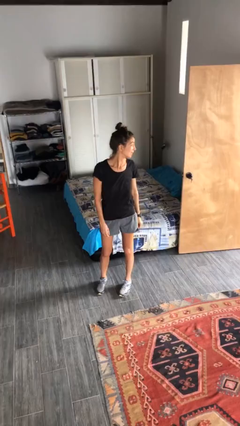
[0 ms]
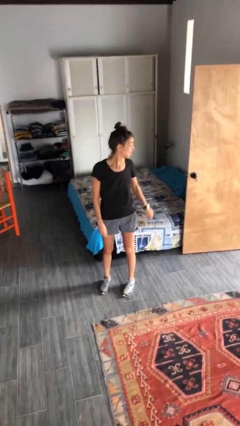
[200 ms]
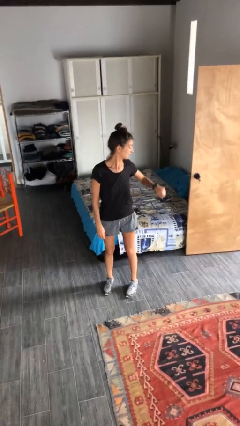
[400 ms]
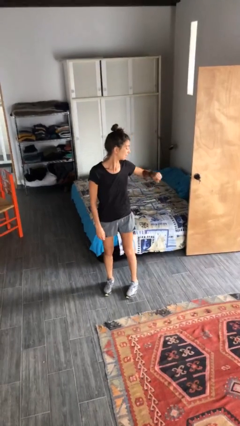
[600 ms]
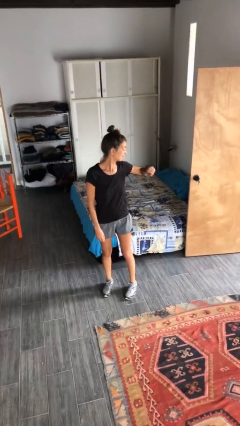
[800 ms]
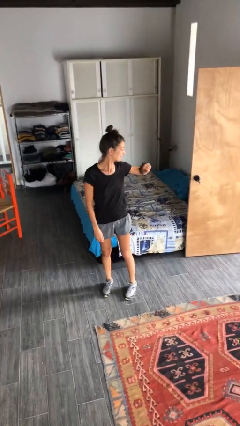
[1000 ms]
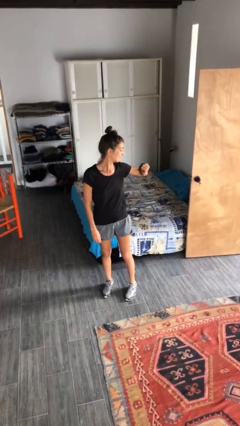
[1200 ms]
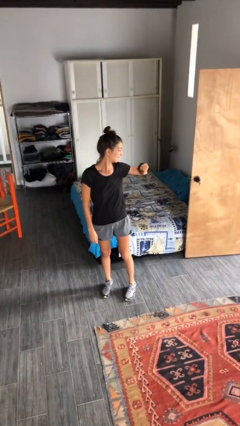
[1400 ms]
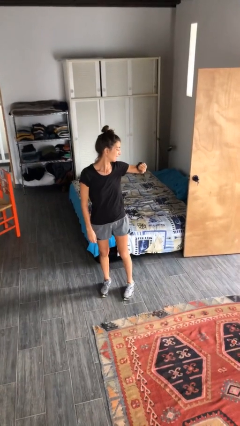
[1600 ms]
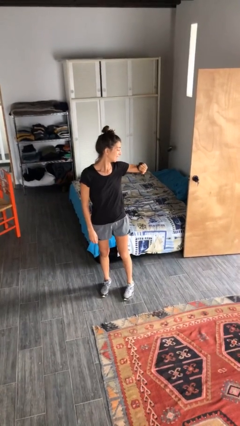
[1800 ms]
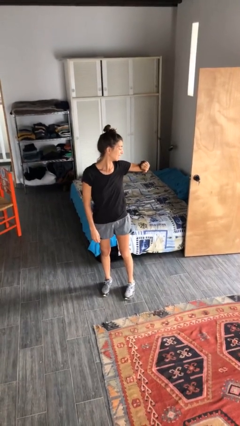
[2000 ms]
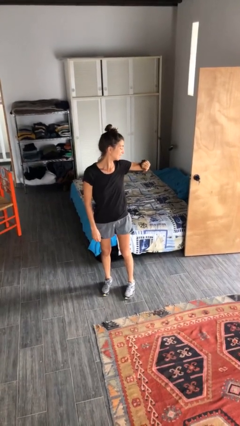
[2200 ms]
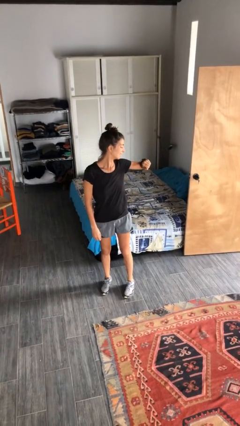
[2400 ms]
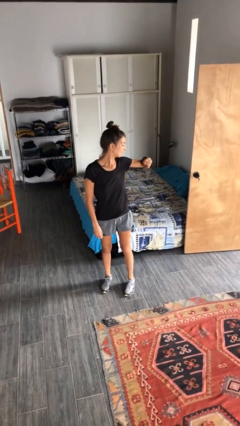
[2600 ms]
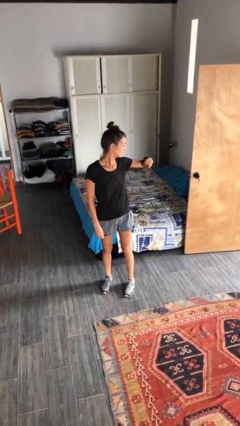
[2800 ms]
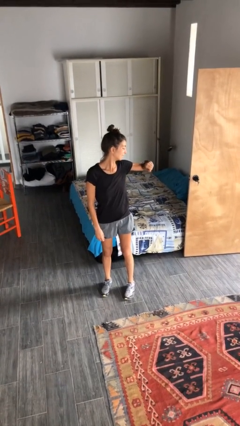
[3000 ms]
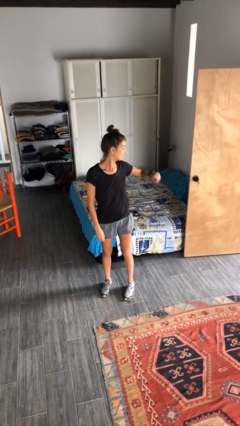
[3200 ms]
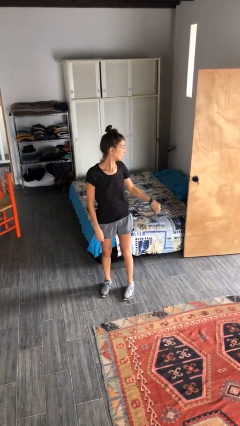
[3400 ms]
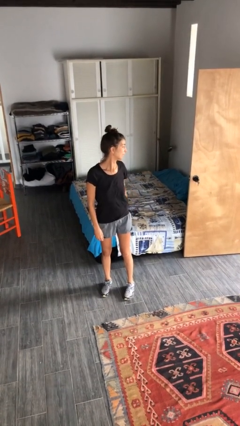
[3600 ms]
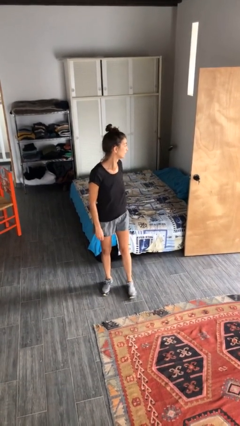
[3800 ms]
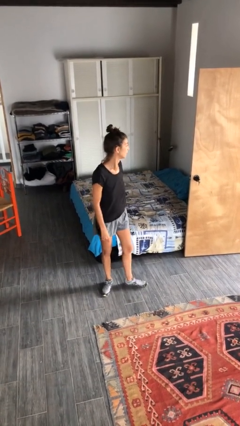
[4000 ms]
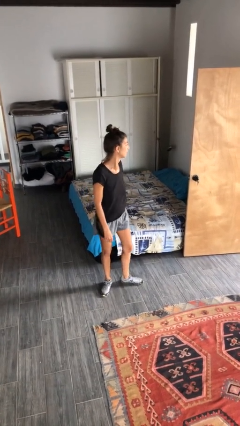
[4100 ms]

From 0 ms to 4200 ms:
person looks at wristwatch

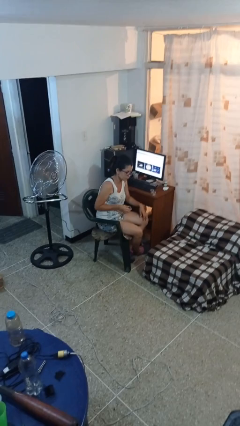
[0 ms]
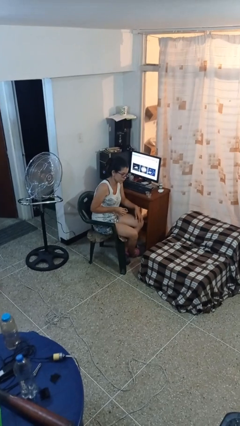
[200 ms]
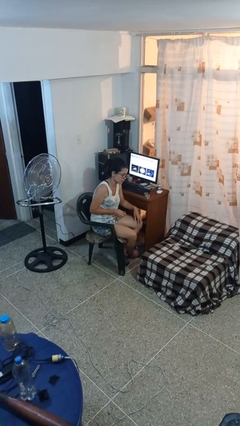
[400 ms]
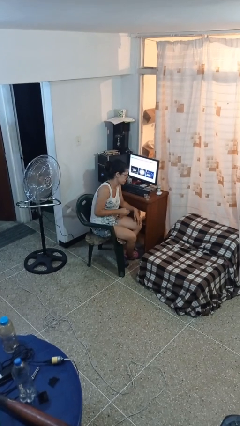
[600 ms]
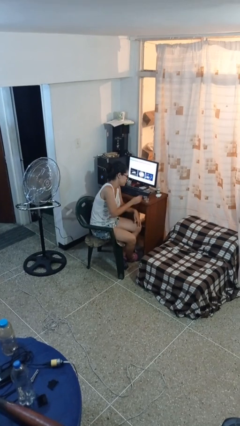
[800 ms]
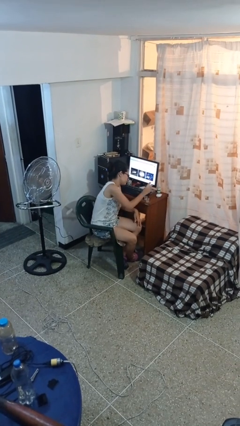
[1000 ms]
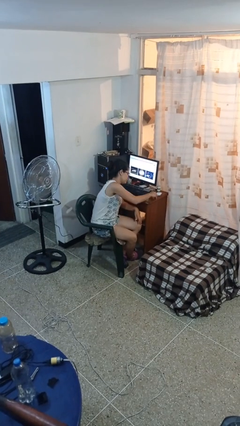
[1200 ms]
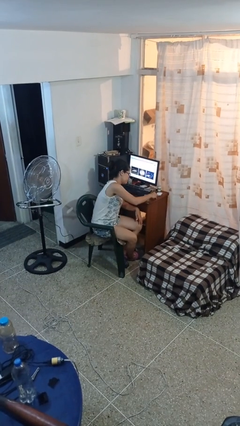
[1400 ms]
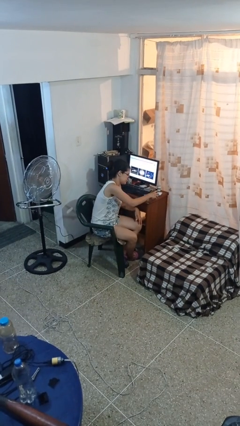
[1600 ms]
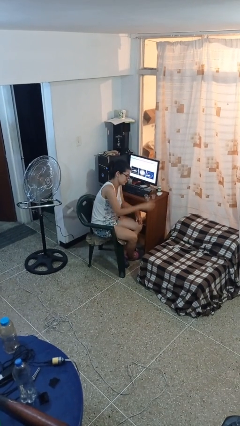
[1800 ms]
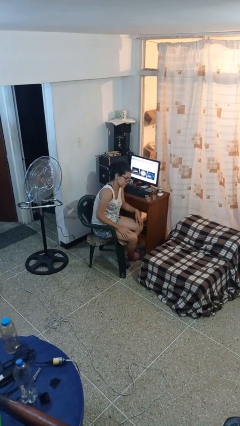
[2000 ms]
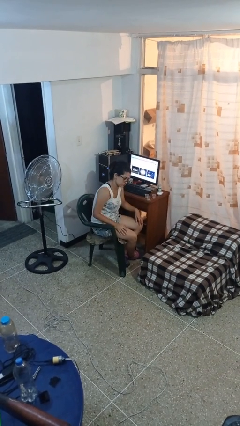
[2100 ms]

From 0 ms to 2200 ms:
person puts down object on table

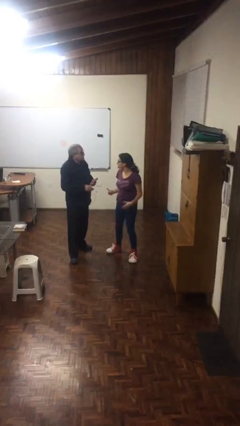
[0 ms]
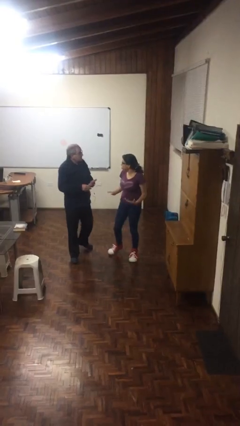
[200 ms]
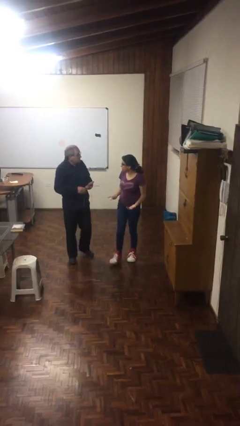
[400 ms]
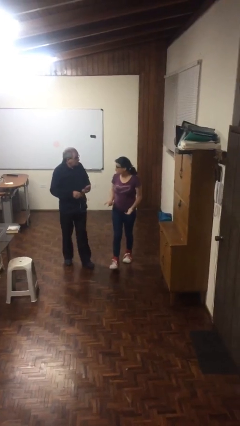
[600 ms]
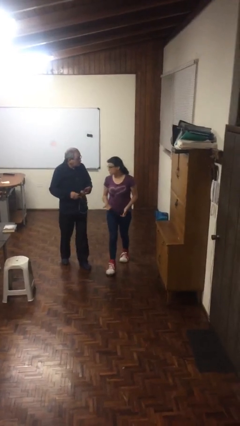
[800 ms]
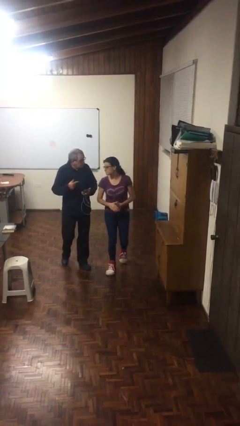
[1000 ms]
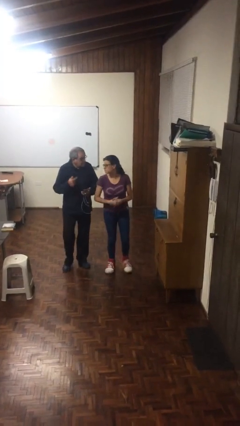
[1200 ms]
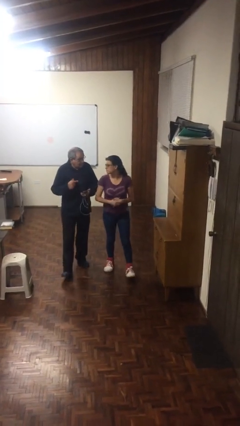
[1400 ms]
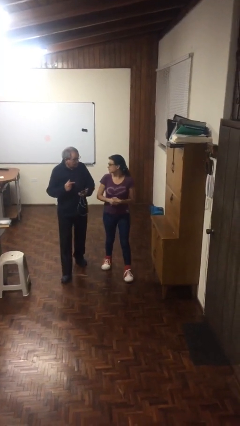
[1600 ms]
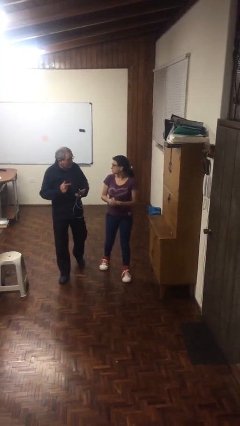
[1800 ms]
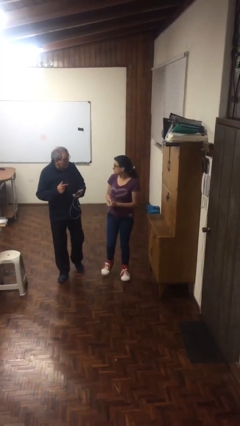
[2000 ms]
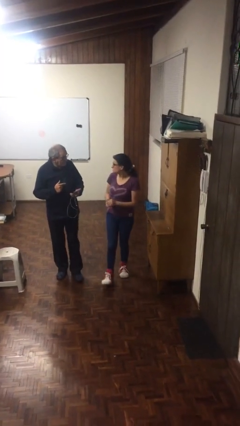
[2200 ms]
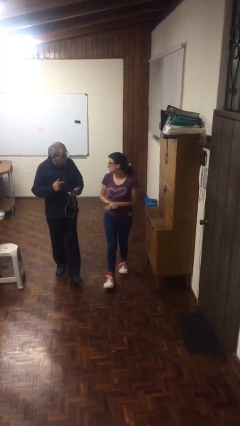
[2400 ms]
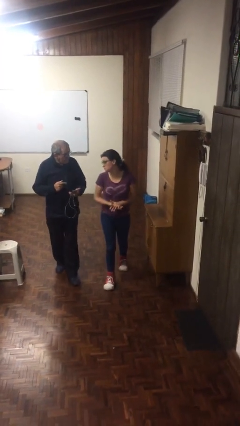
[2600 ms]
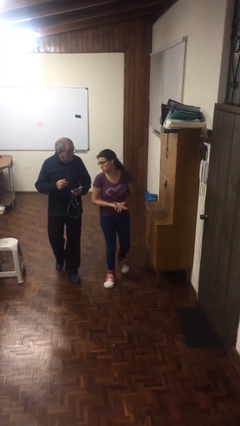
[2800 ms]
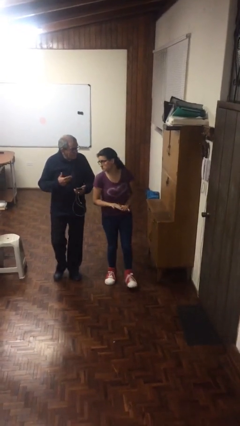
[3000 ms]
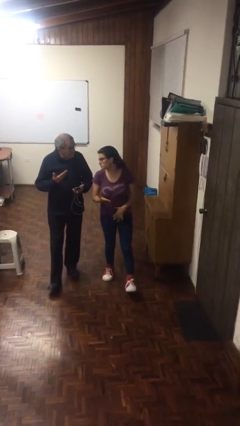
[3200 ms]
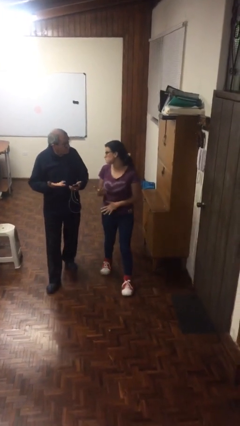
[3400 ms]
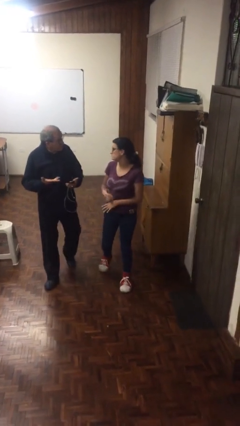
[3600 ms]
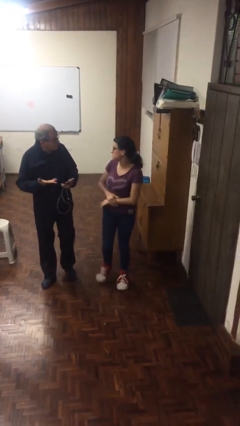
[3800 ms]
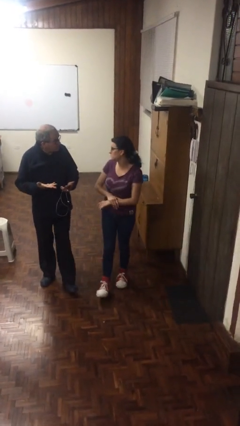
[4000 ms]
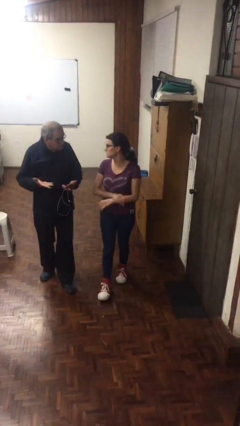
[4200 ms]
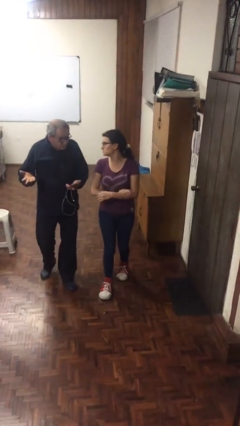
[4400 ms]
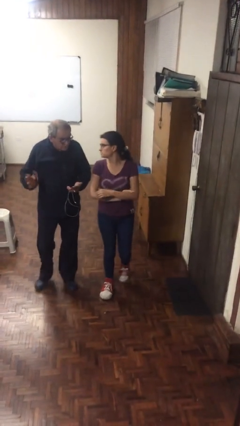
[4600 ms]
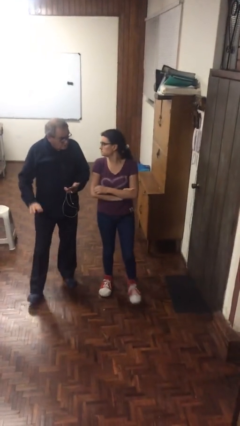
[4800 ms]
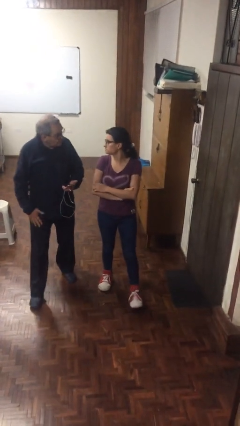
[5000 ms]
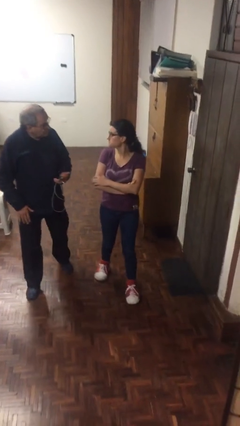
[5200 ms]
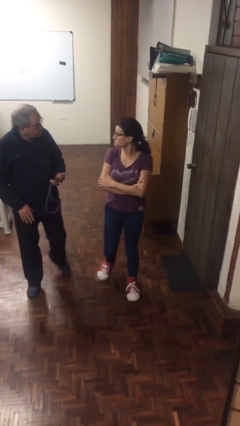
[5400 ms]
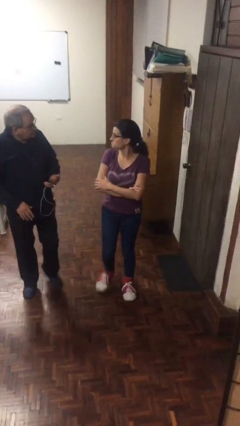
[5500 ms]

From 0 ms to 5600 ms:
person talks to person

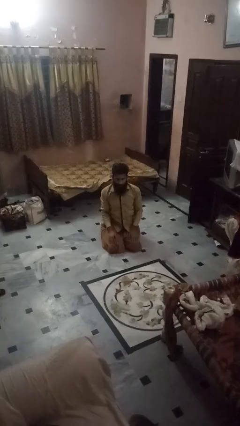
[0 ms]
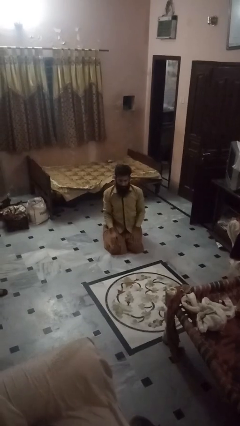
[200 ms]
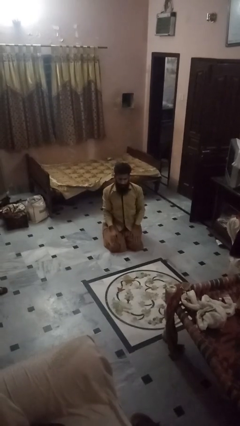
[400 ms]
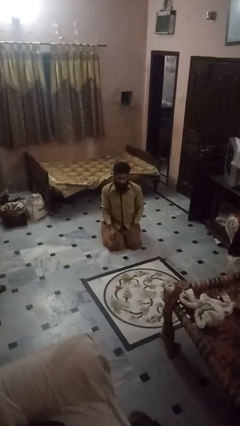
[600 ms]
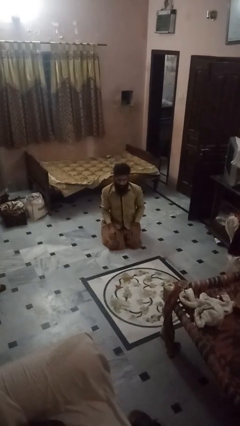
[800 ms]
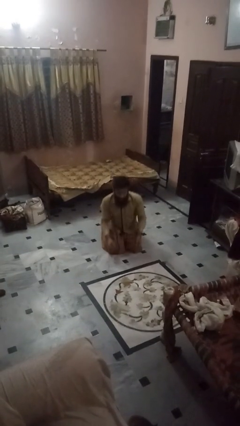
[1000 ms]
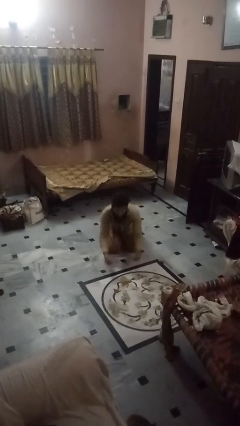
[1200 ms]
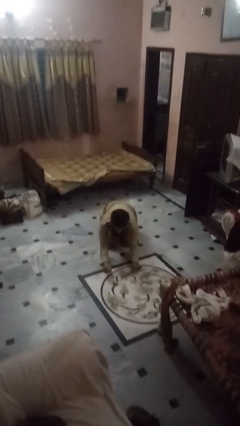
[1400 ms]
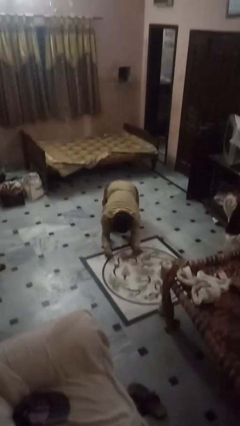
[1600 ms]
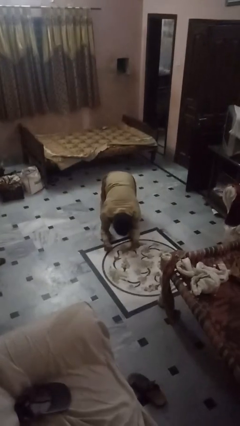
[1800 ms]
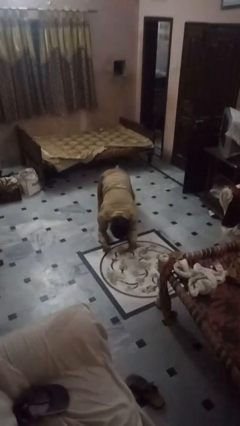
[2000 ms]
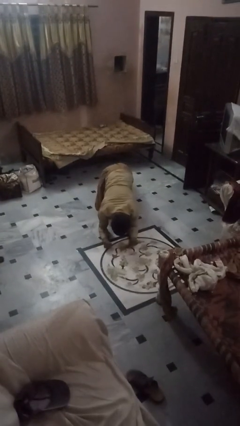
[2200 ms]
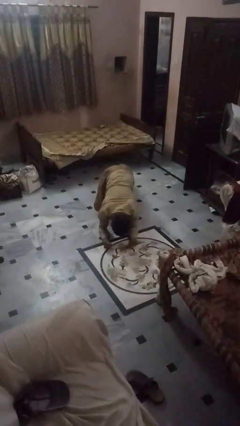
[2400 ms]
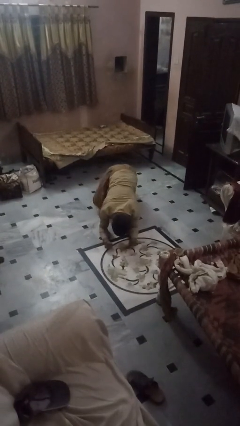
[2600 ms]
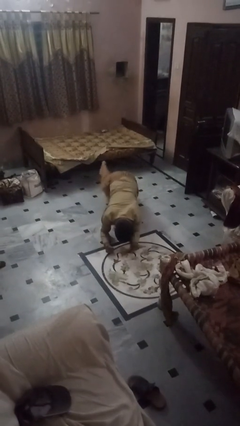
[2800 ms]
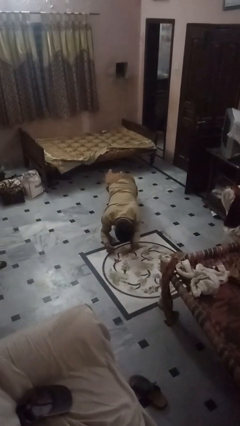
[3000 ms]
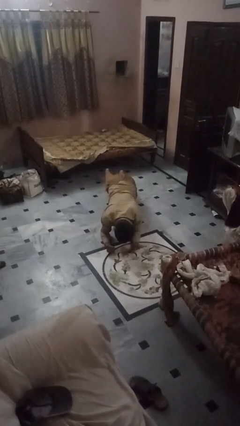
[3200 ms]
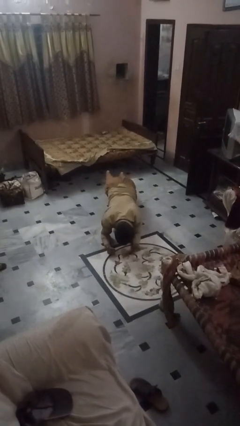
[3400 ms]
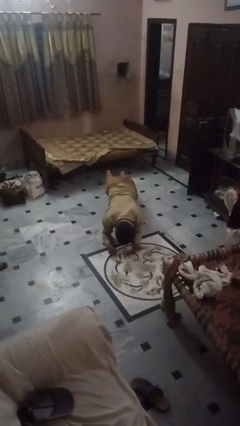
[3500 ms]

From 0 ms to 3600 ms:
person exercises with plank

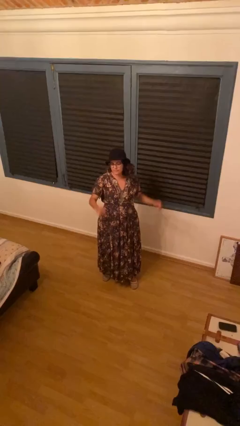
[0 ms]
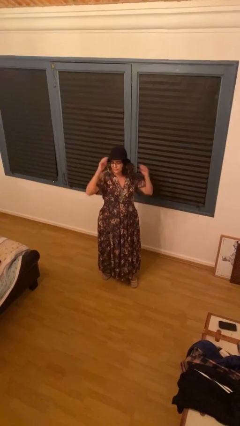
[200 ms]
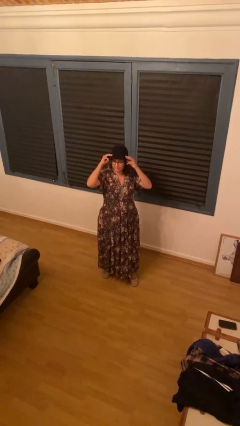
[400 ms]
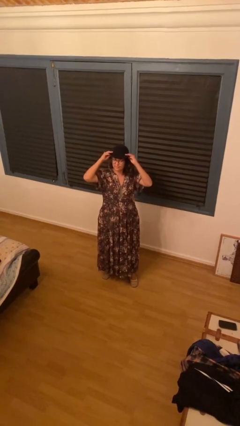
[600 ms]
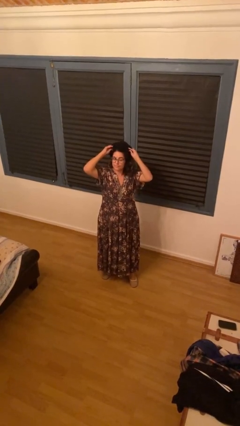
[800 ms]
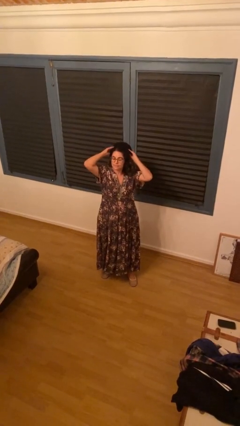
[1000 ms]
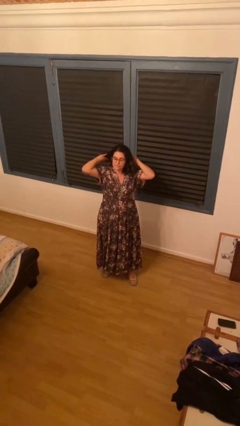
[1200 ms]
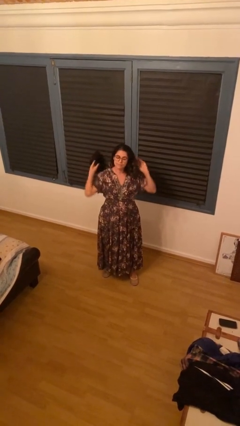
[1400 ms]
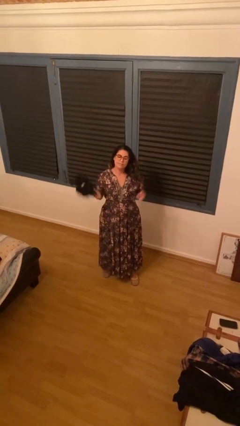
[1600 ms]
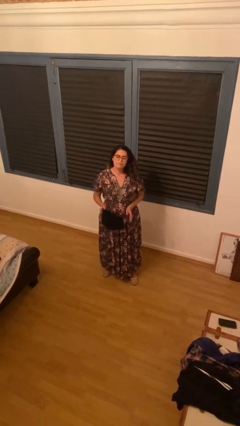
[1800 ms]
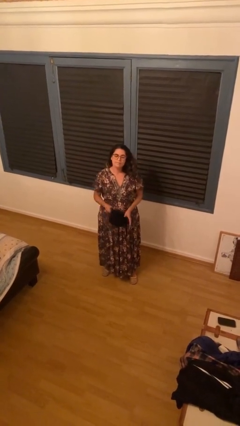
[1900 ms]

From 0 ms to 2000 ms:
person takes off hat
